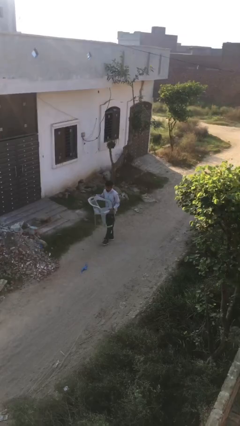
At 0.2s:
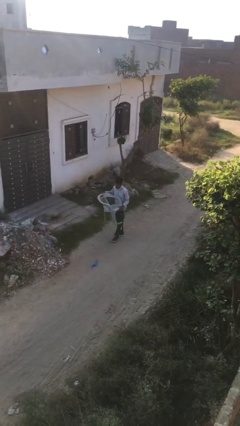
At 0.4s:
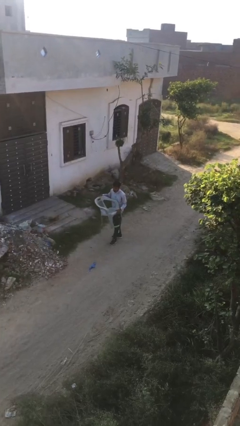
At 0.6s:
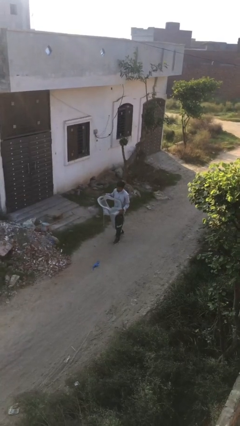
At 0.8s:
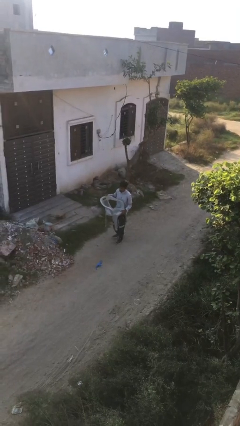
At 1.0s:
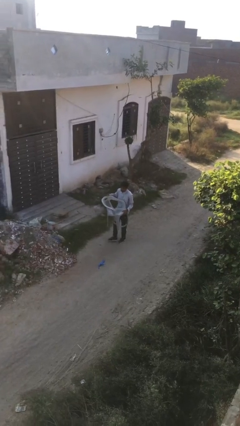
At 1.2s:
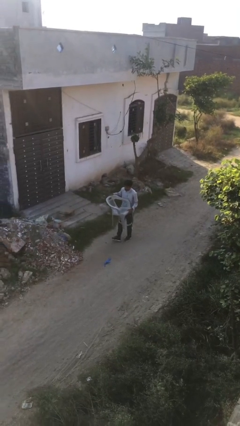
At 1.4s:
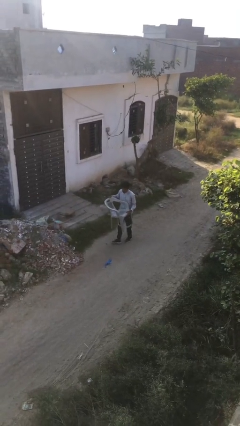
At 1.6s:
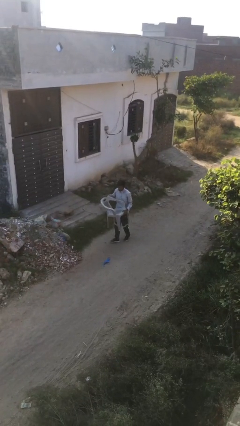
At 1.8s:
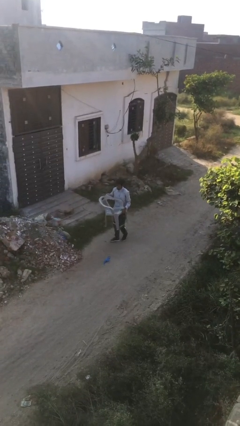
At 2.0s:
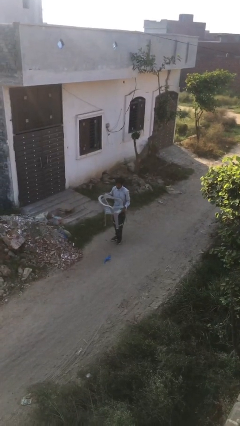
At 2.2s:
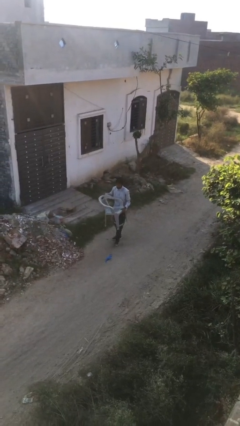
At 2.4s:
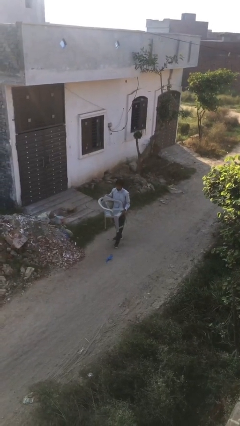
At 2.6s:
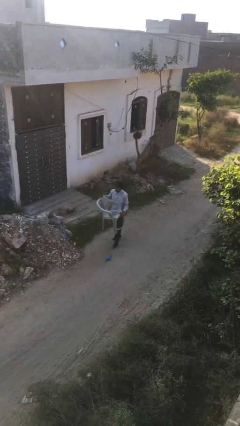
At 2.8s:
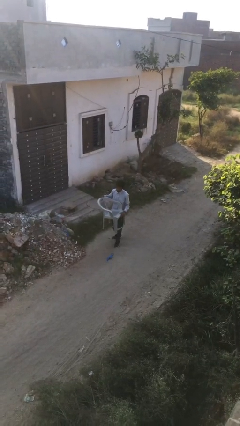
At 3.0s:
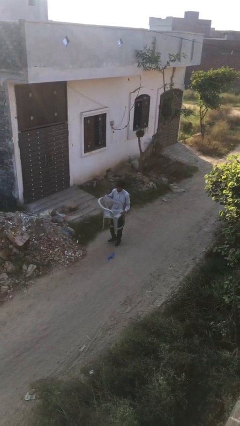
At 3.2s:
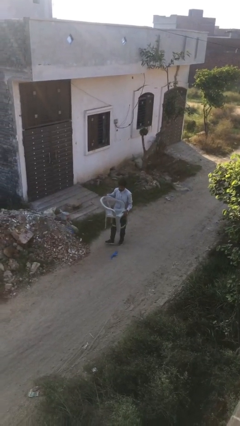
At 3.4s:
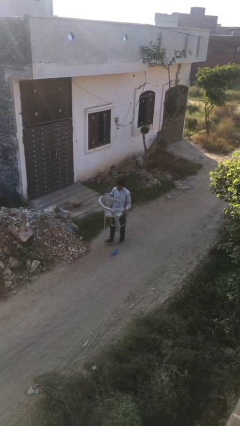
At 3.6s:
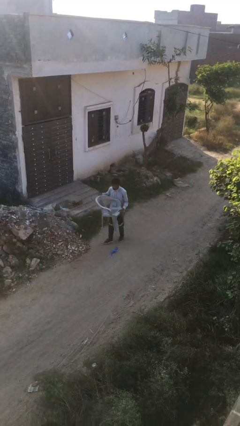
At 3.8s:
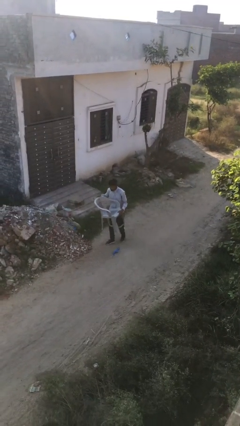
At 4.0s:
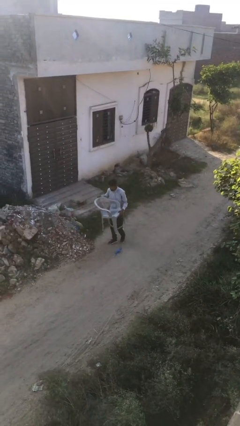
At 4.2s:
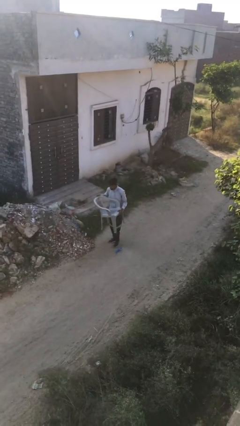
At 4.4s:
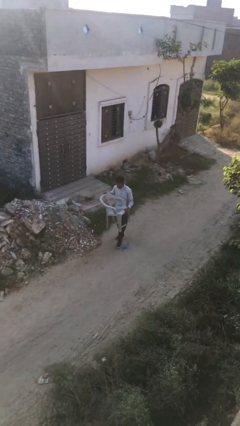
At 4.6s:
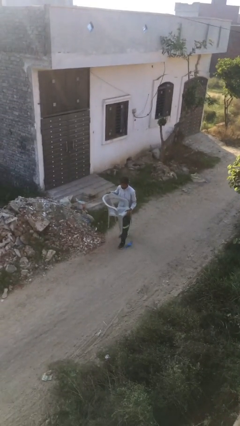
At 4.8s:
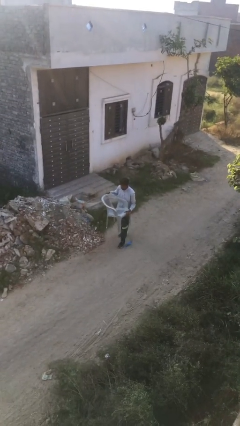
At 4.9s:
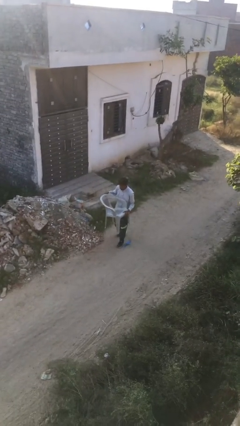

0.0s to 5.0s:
person carries heavy object

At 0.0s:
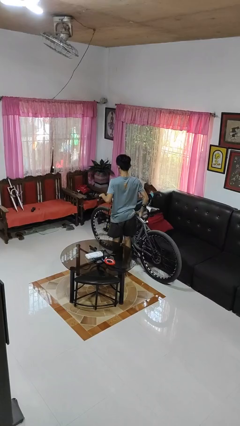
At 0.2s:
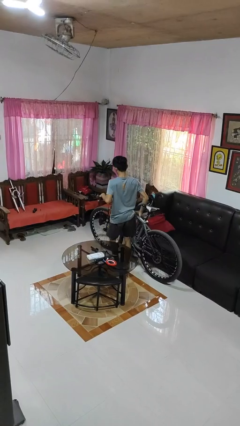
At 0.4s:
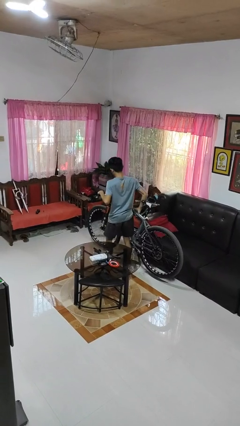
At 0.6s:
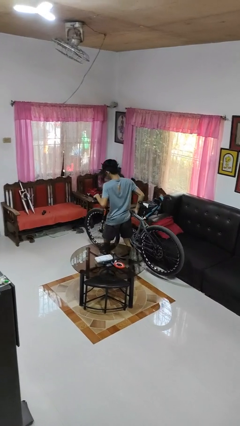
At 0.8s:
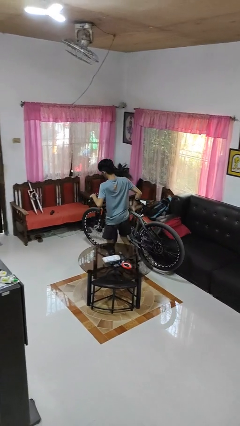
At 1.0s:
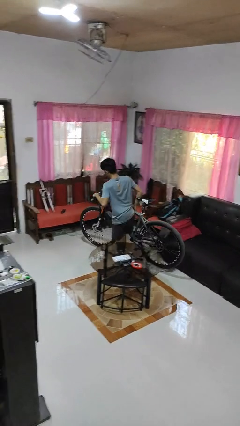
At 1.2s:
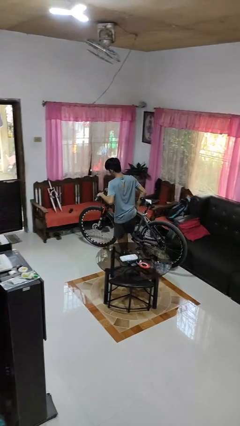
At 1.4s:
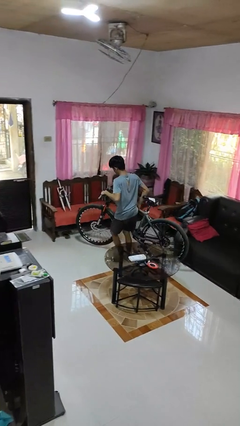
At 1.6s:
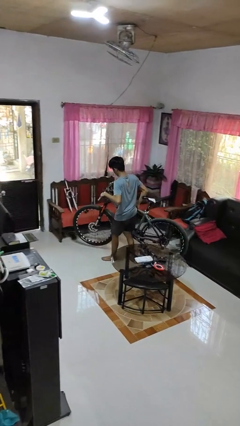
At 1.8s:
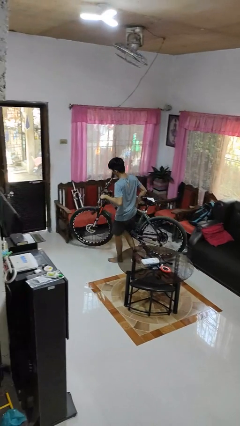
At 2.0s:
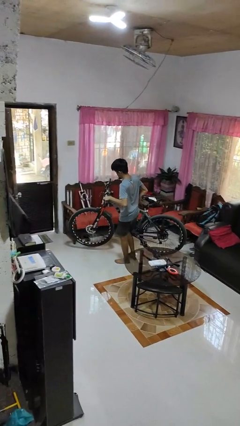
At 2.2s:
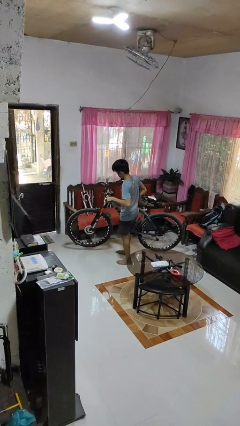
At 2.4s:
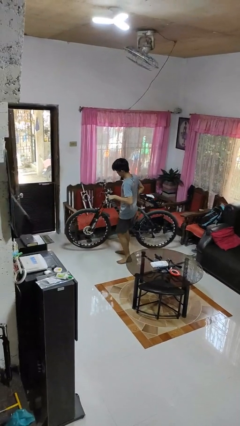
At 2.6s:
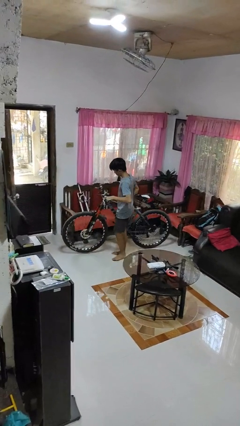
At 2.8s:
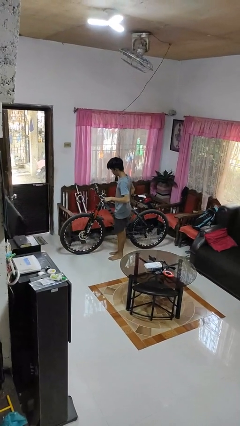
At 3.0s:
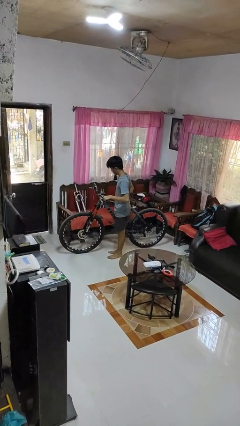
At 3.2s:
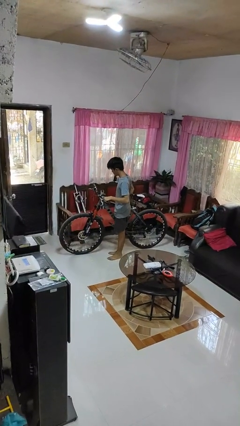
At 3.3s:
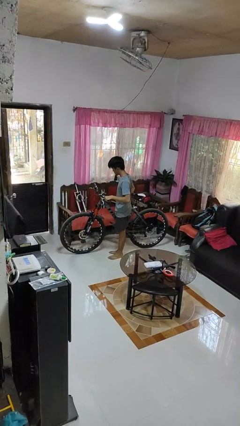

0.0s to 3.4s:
person carries bicycle

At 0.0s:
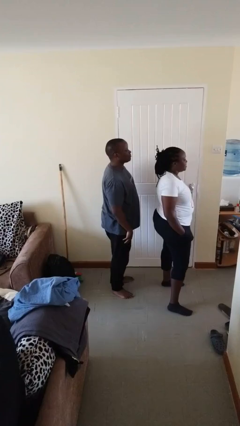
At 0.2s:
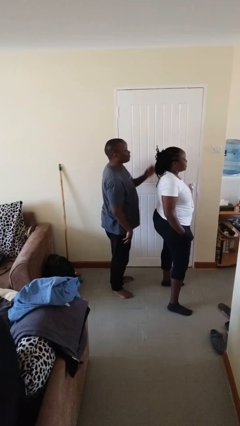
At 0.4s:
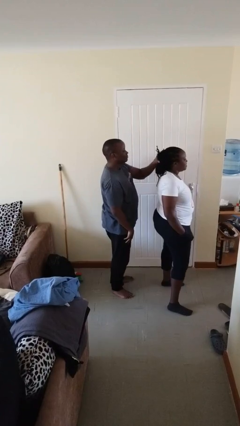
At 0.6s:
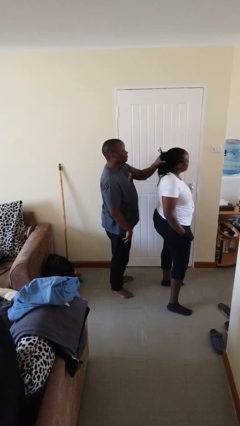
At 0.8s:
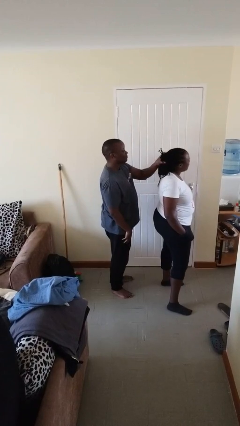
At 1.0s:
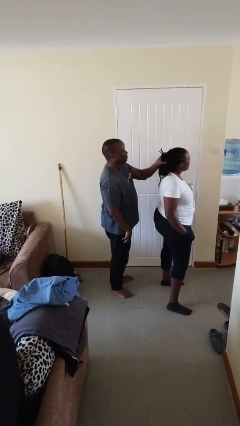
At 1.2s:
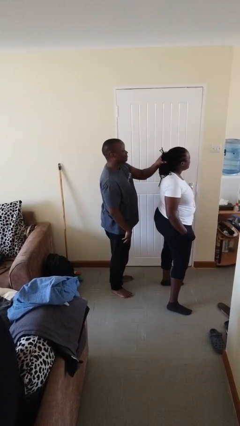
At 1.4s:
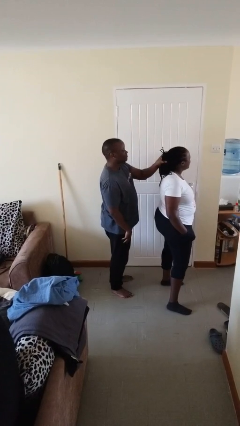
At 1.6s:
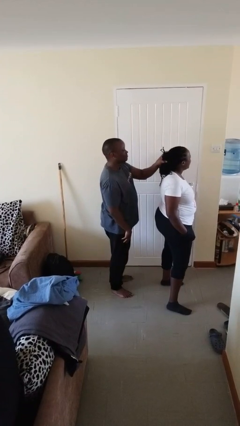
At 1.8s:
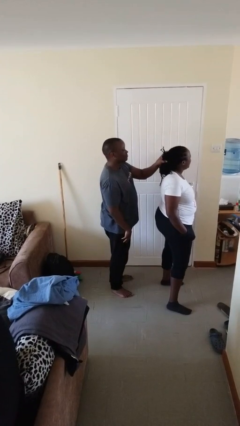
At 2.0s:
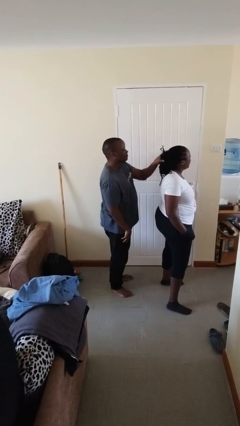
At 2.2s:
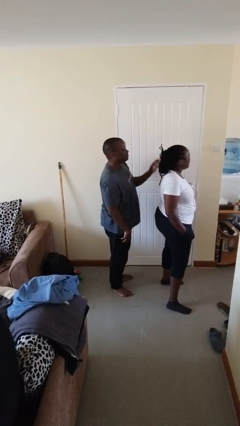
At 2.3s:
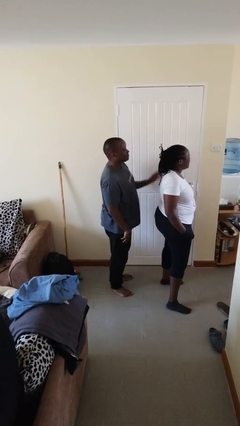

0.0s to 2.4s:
person grabs person by hair

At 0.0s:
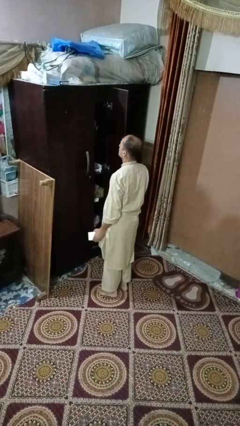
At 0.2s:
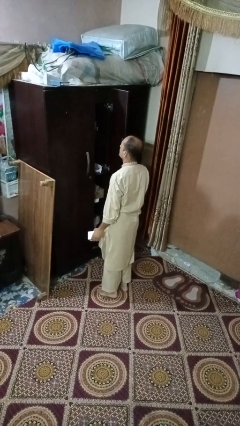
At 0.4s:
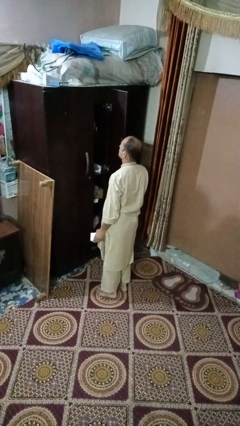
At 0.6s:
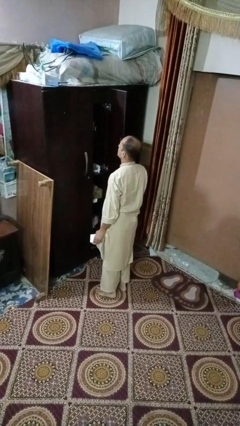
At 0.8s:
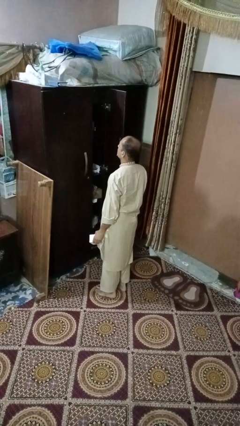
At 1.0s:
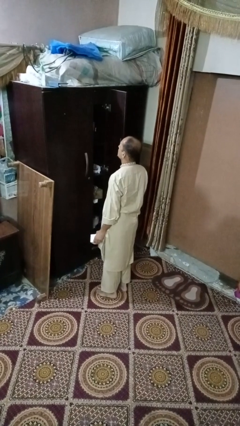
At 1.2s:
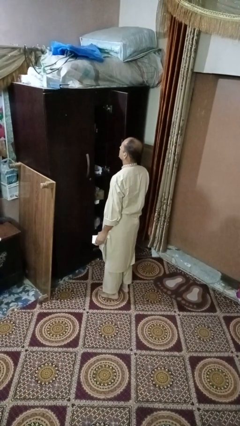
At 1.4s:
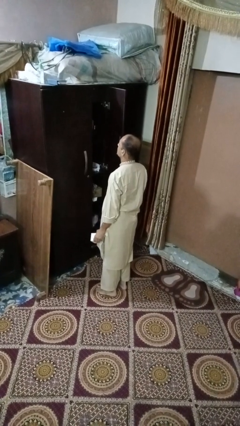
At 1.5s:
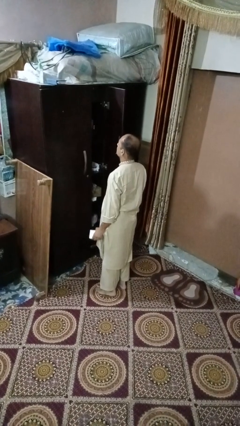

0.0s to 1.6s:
person puts down object into cabinet

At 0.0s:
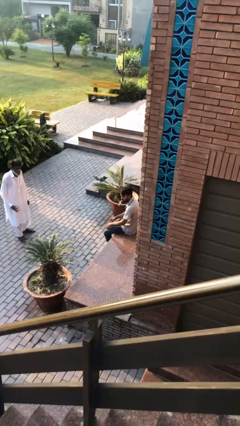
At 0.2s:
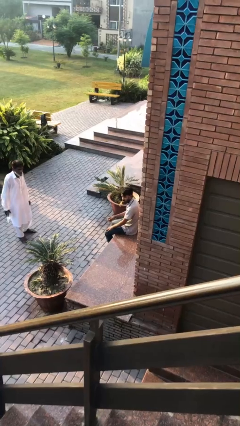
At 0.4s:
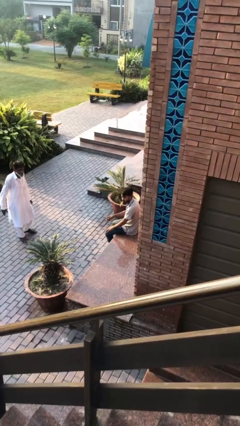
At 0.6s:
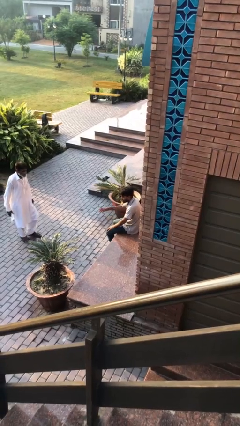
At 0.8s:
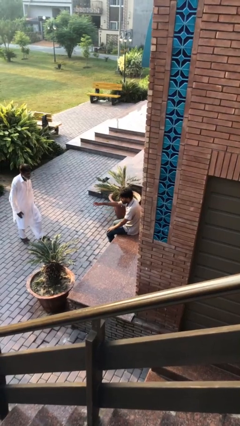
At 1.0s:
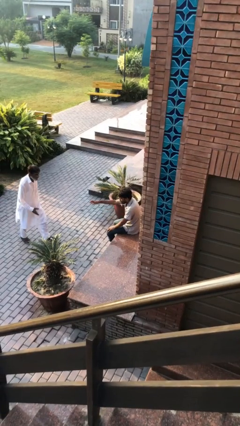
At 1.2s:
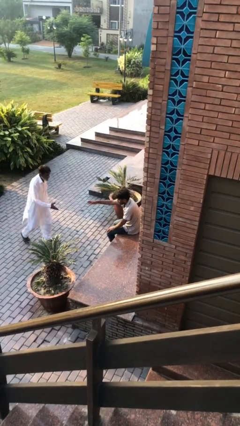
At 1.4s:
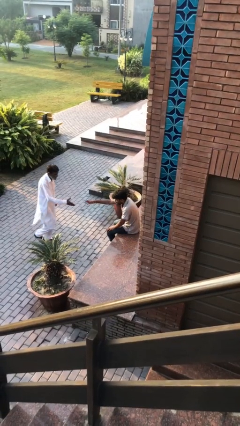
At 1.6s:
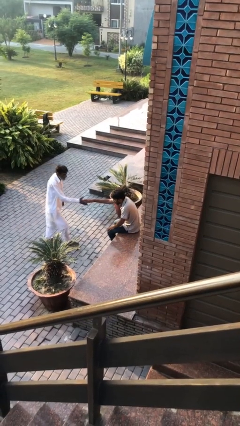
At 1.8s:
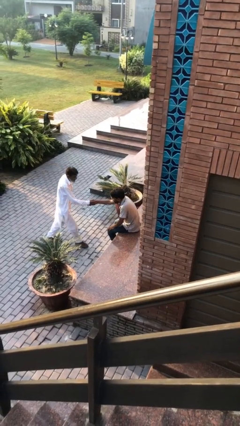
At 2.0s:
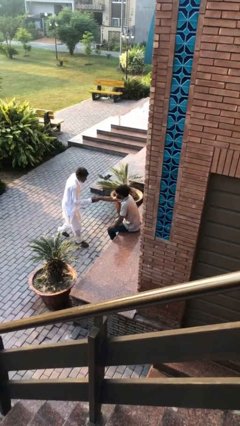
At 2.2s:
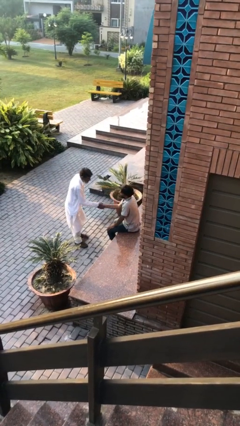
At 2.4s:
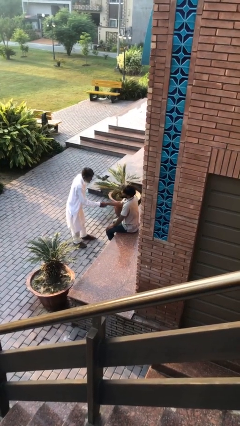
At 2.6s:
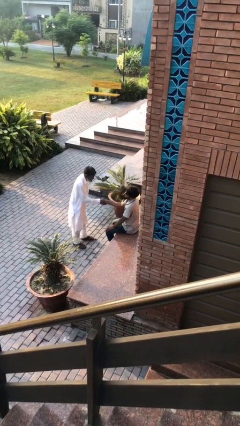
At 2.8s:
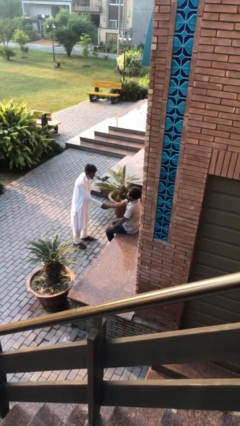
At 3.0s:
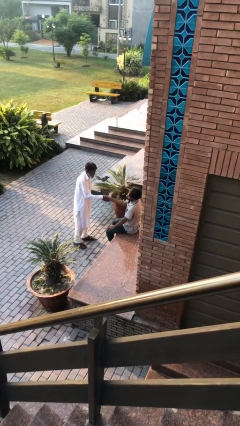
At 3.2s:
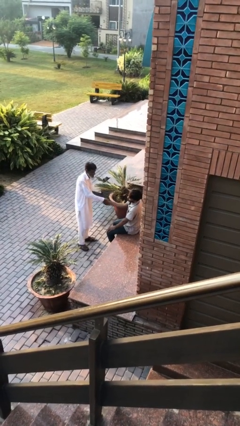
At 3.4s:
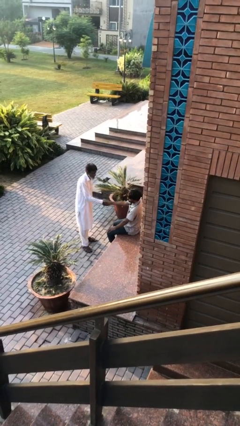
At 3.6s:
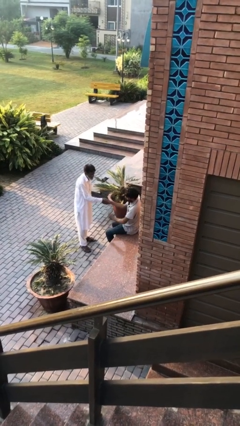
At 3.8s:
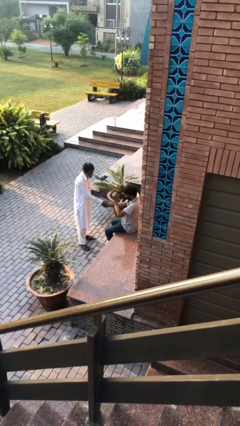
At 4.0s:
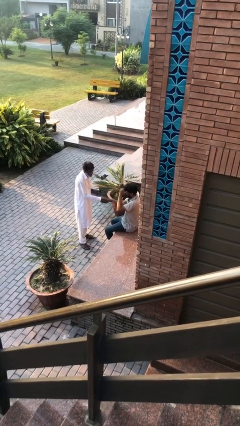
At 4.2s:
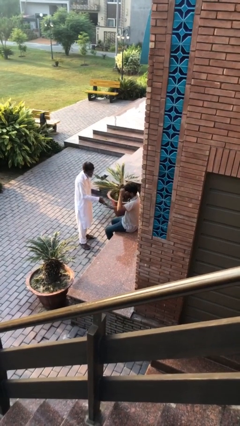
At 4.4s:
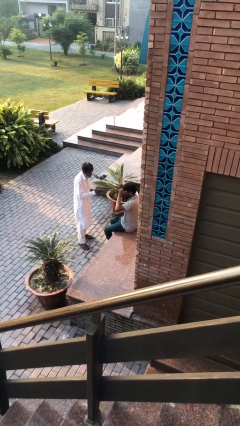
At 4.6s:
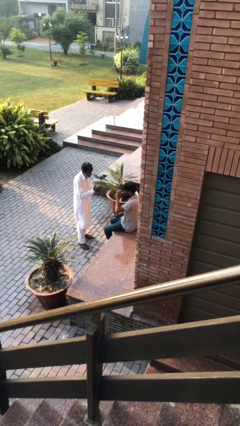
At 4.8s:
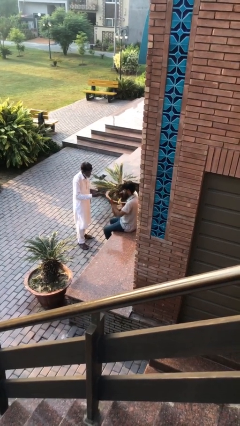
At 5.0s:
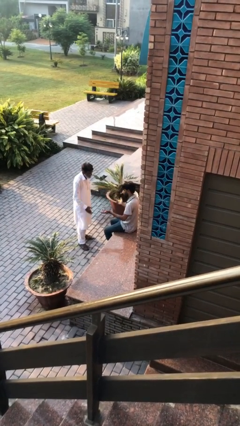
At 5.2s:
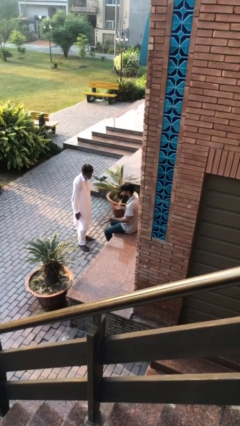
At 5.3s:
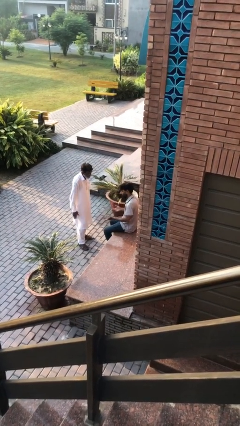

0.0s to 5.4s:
person shakes hand
